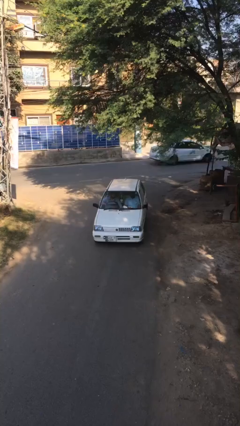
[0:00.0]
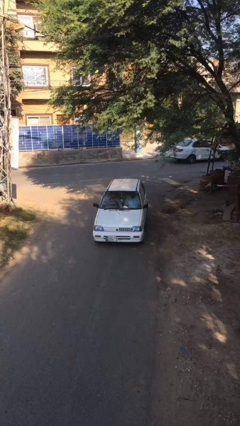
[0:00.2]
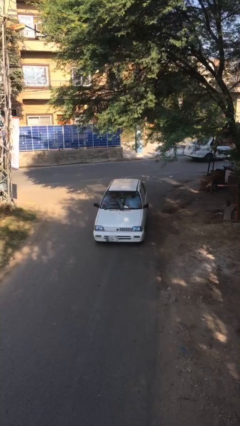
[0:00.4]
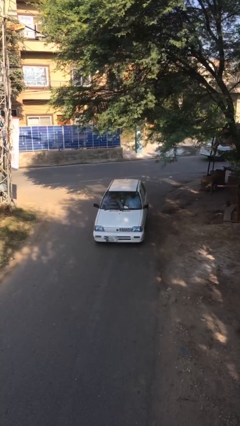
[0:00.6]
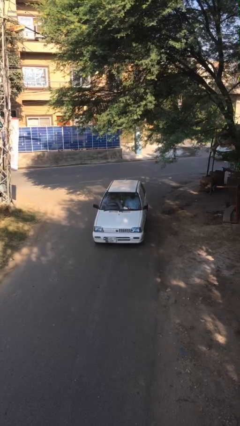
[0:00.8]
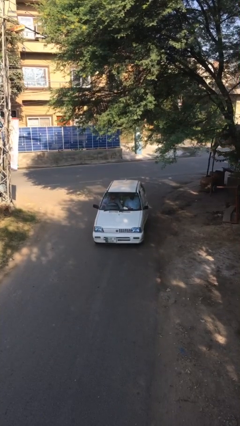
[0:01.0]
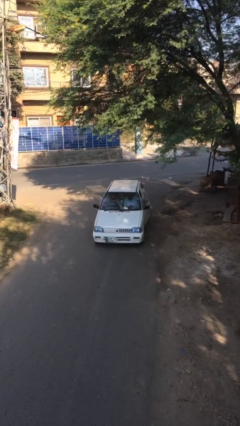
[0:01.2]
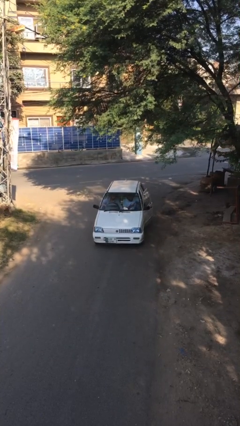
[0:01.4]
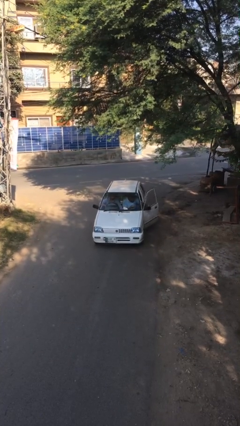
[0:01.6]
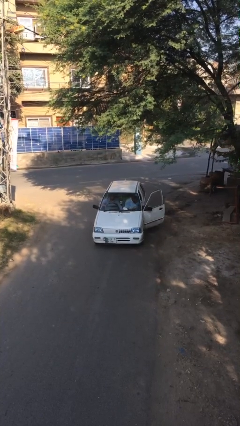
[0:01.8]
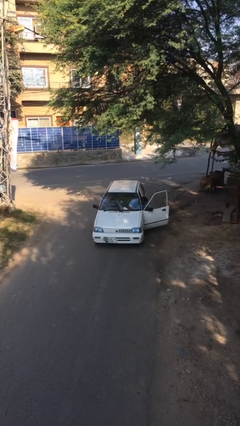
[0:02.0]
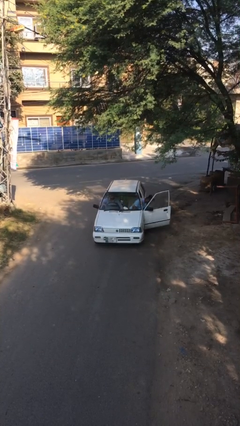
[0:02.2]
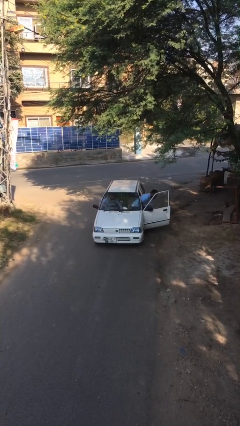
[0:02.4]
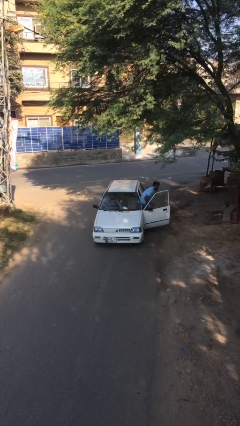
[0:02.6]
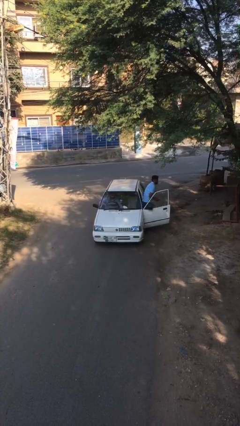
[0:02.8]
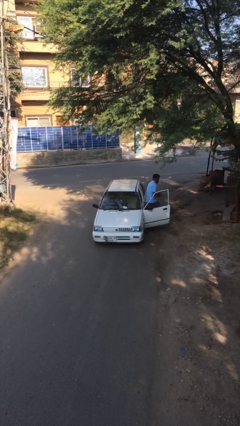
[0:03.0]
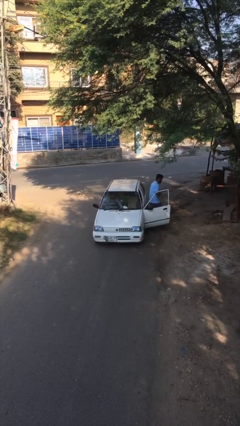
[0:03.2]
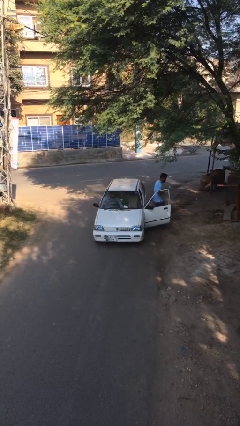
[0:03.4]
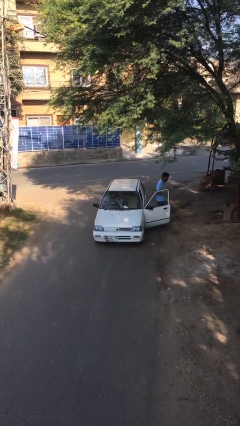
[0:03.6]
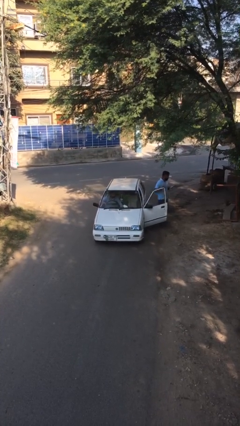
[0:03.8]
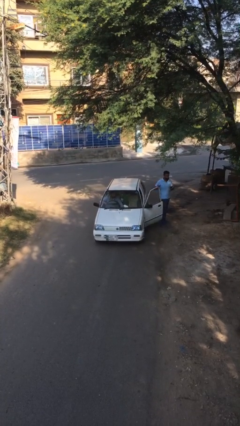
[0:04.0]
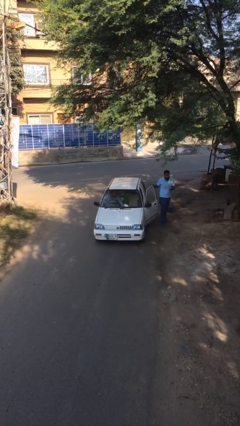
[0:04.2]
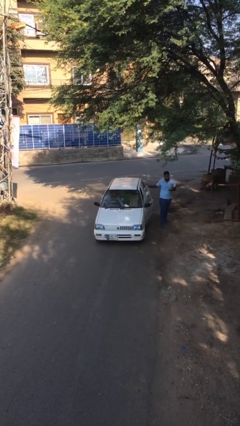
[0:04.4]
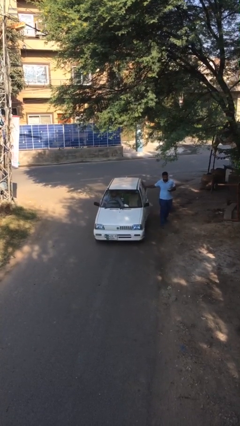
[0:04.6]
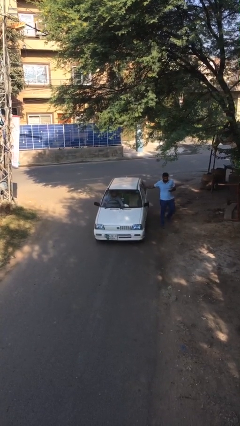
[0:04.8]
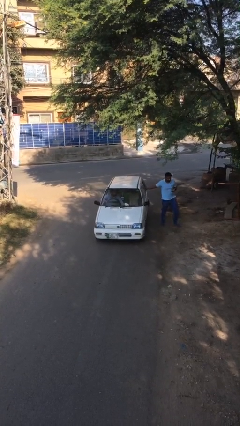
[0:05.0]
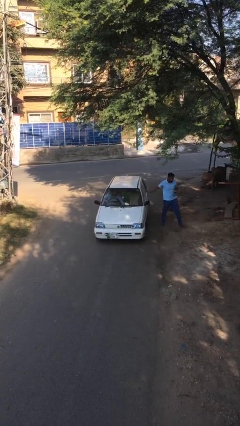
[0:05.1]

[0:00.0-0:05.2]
car drops off person

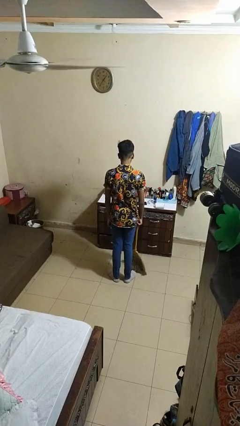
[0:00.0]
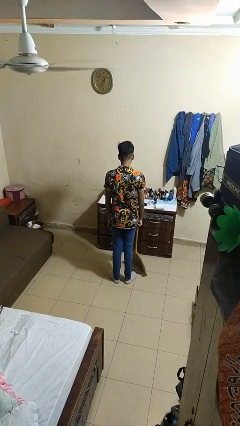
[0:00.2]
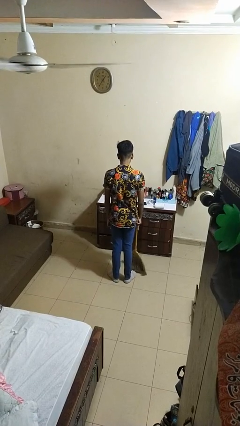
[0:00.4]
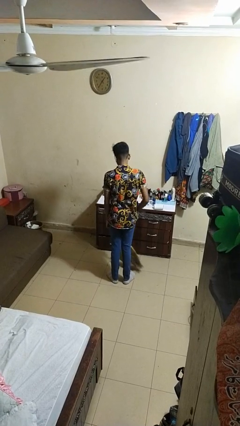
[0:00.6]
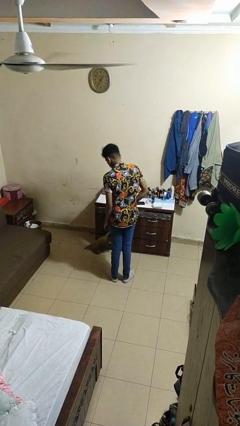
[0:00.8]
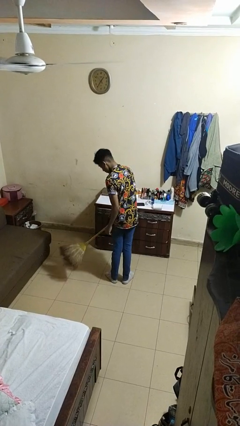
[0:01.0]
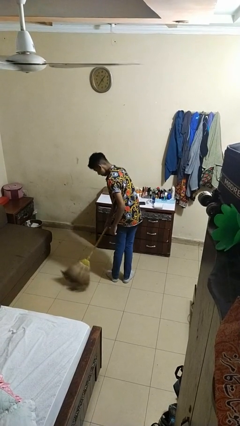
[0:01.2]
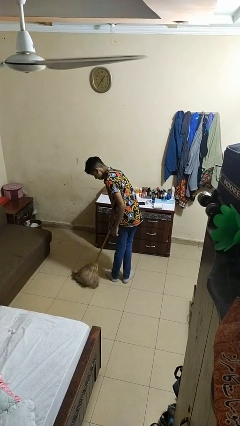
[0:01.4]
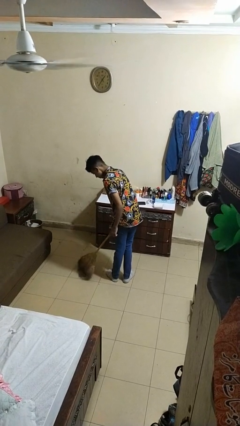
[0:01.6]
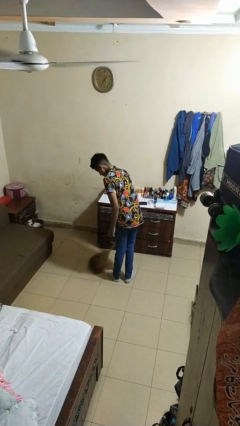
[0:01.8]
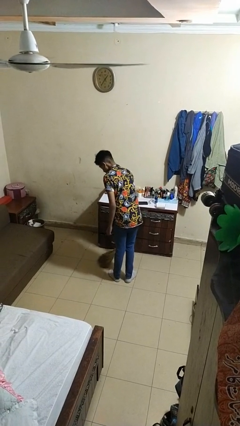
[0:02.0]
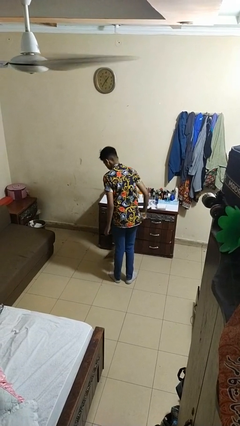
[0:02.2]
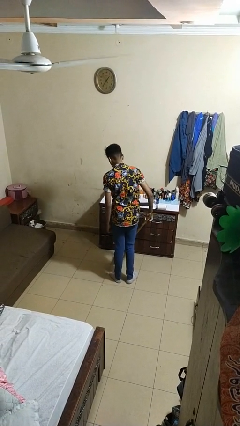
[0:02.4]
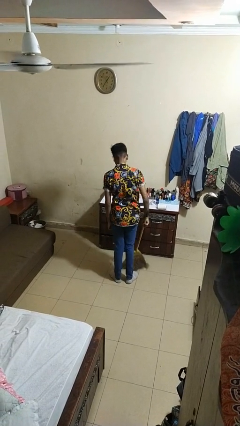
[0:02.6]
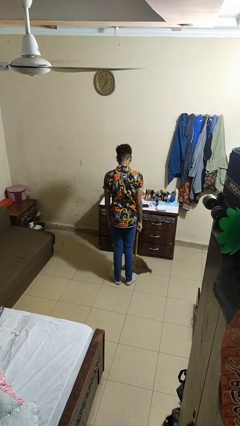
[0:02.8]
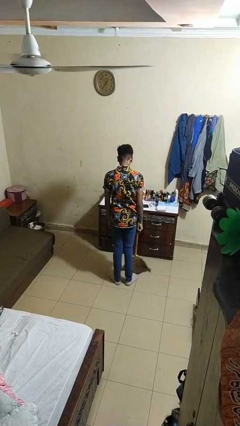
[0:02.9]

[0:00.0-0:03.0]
person sweeps floor

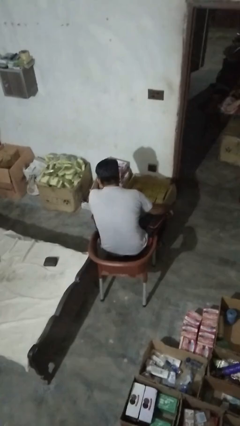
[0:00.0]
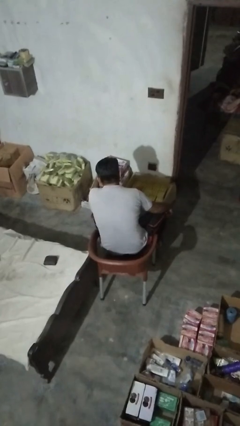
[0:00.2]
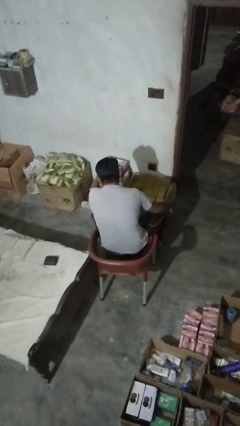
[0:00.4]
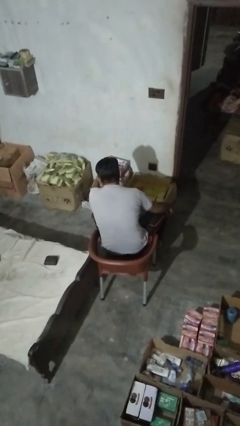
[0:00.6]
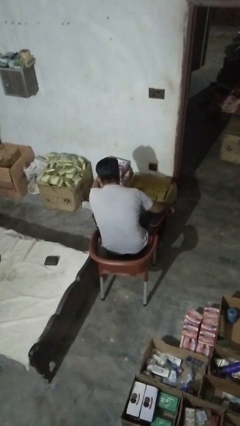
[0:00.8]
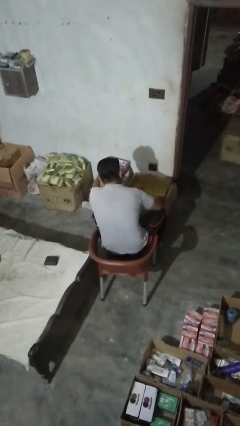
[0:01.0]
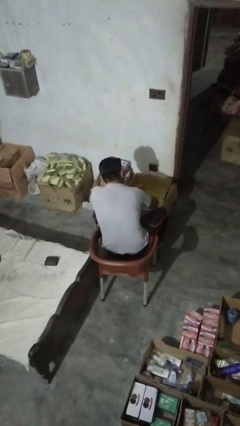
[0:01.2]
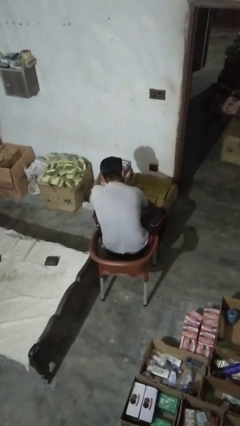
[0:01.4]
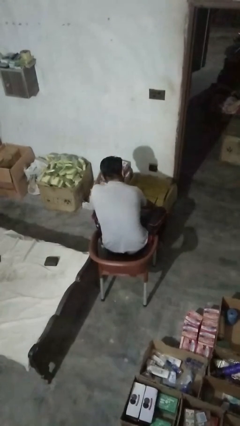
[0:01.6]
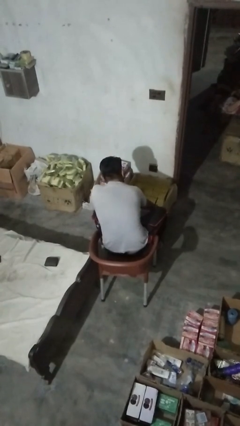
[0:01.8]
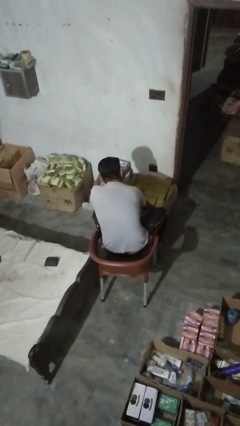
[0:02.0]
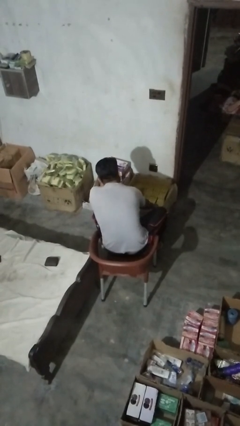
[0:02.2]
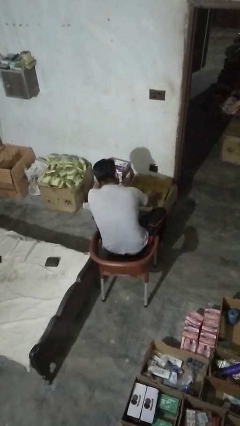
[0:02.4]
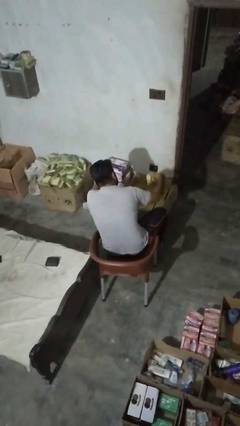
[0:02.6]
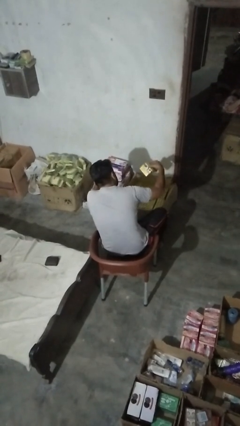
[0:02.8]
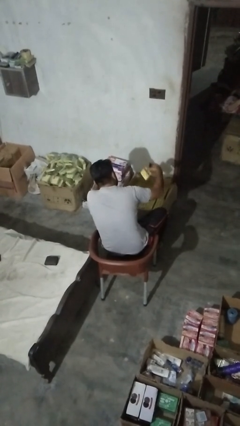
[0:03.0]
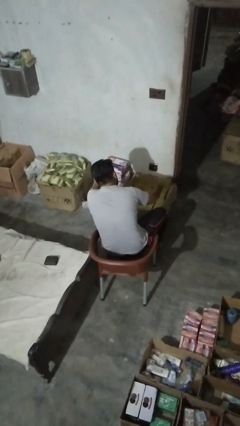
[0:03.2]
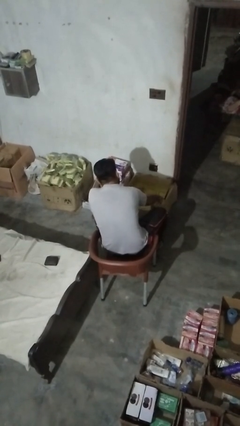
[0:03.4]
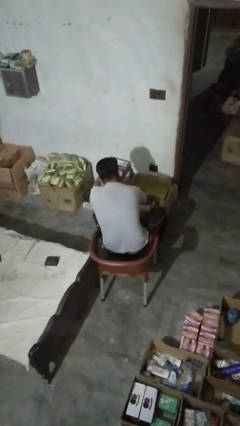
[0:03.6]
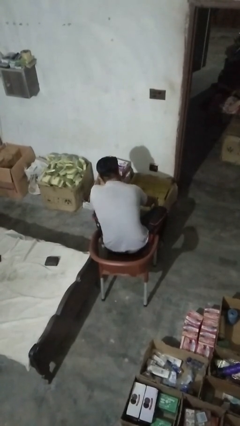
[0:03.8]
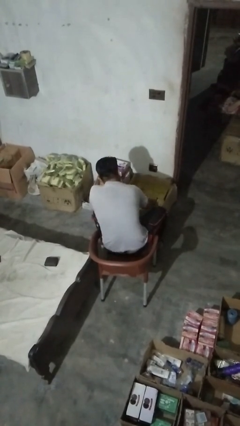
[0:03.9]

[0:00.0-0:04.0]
person searches in box

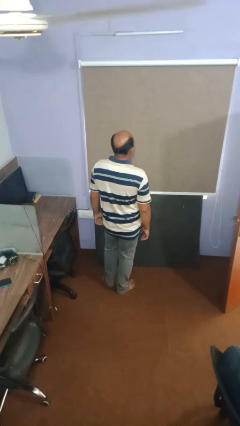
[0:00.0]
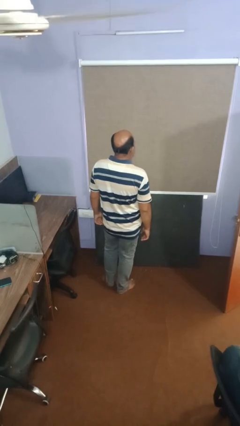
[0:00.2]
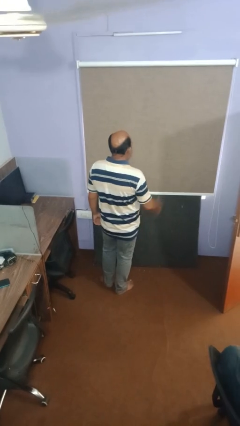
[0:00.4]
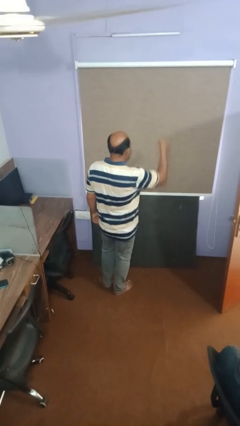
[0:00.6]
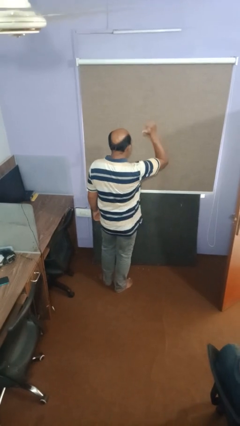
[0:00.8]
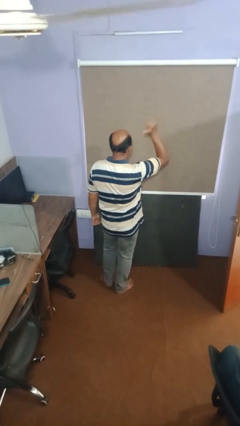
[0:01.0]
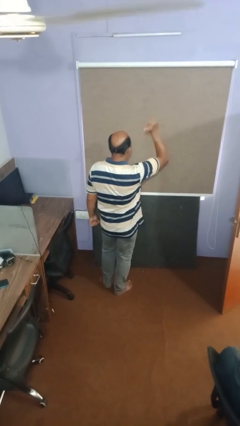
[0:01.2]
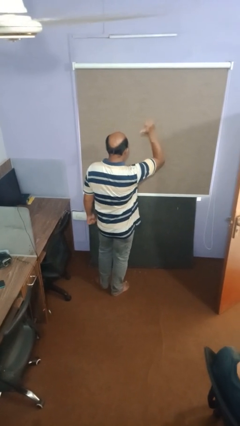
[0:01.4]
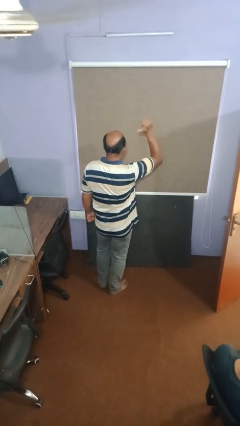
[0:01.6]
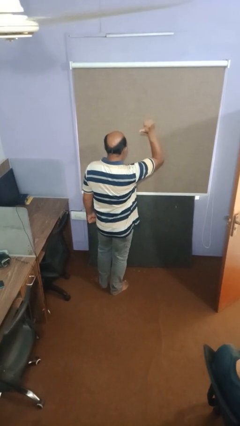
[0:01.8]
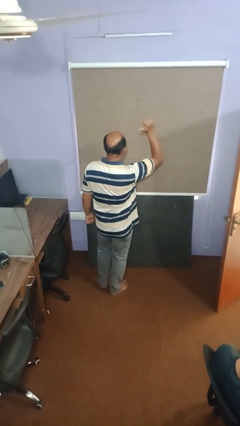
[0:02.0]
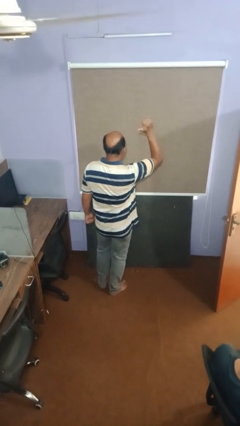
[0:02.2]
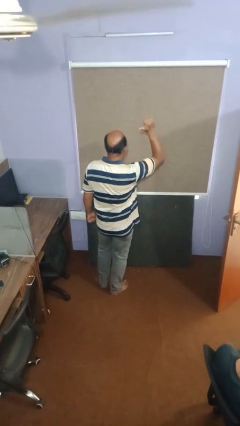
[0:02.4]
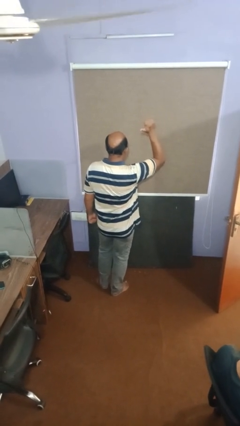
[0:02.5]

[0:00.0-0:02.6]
person gestures thumbs up

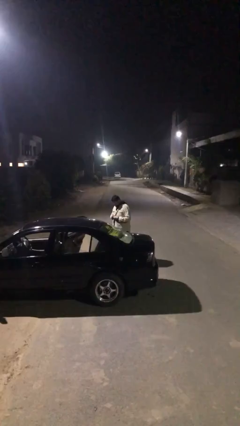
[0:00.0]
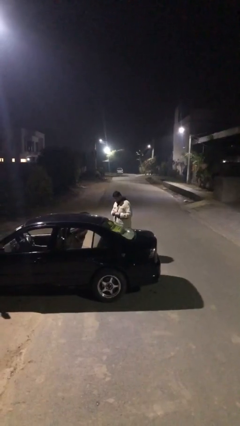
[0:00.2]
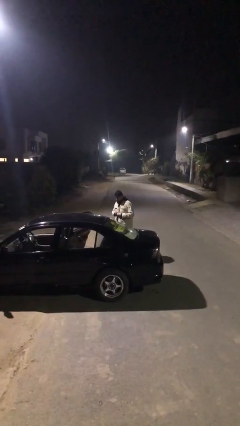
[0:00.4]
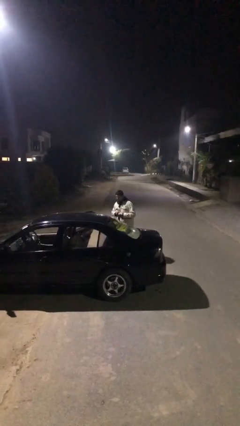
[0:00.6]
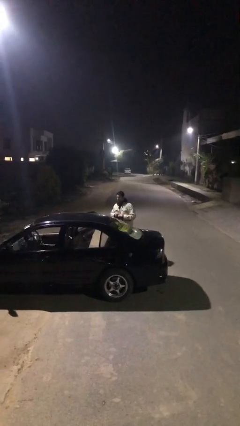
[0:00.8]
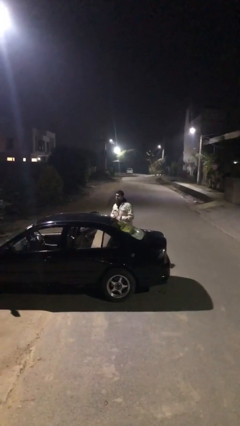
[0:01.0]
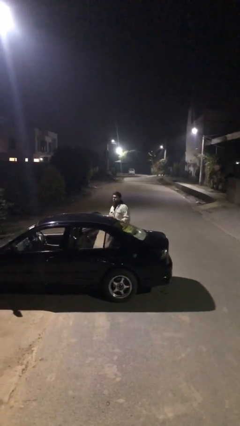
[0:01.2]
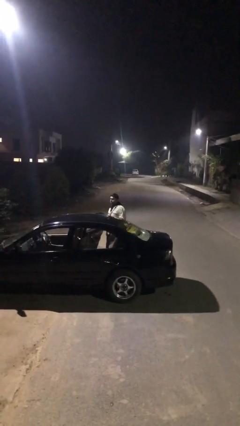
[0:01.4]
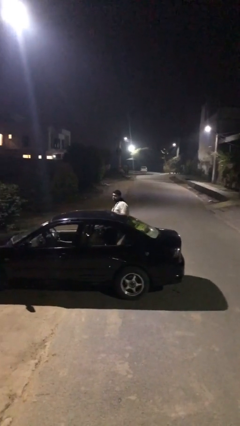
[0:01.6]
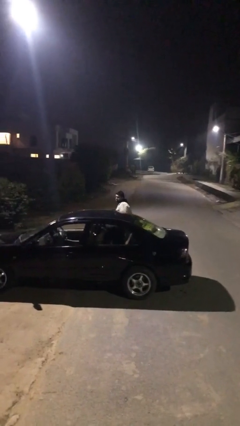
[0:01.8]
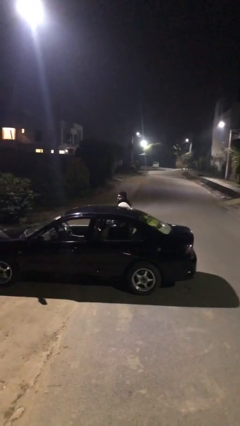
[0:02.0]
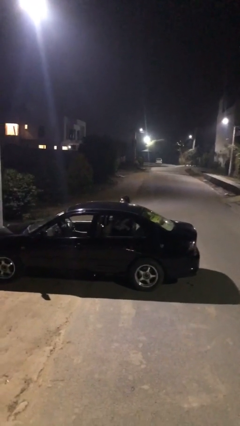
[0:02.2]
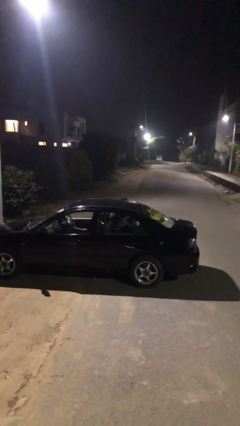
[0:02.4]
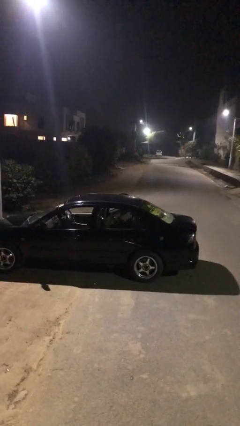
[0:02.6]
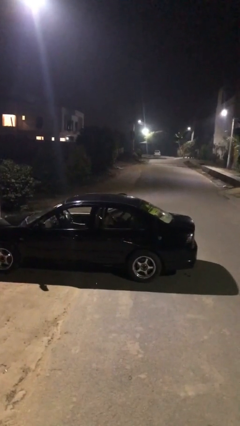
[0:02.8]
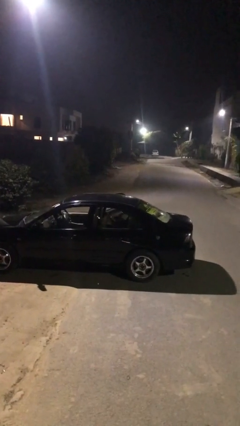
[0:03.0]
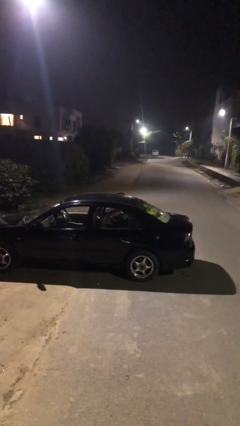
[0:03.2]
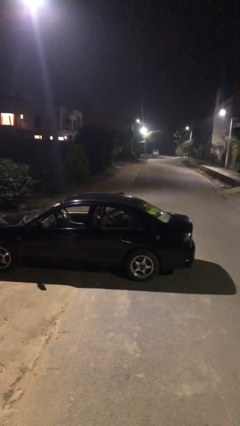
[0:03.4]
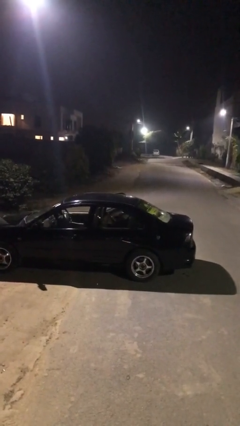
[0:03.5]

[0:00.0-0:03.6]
person enters car
